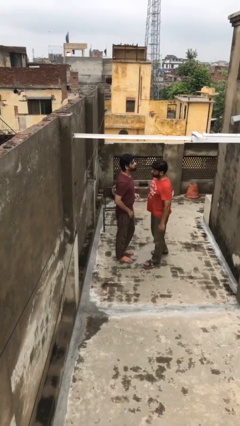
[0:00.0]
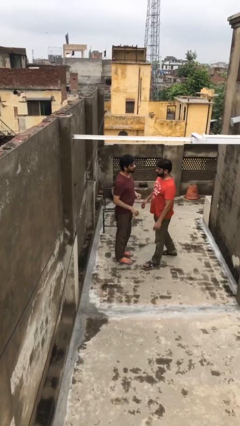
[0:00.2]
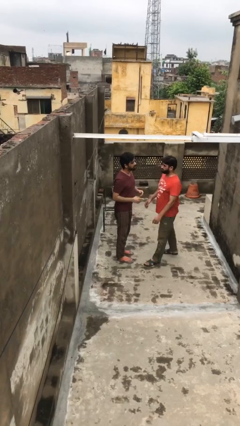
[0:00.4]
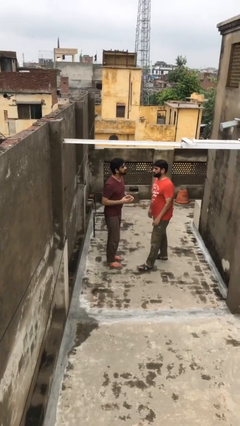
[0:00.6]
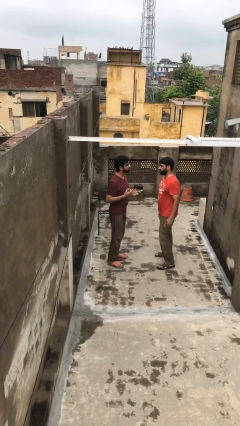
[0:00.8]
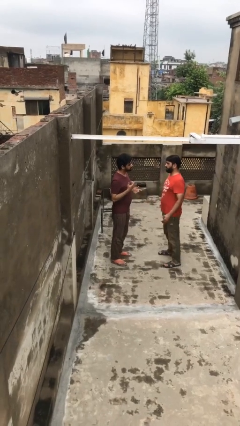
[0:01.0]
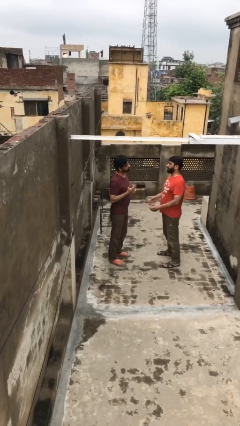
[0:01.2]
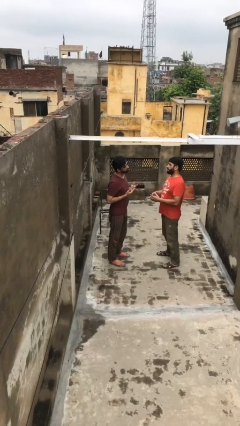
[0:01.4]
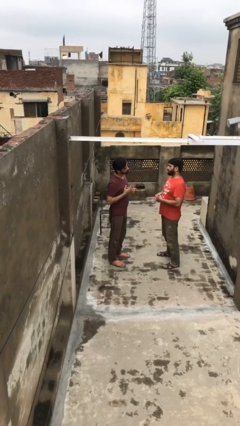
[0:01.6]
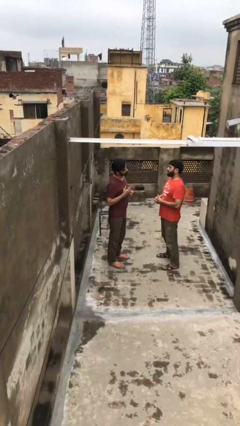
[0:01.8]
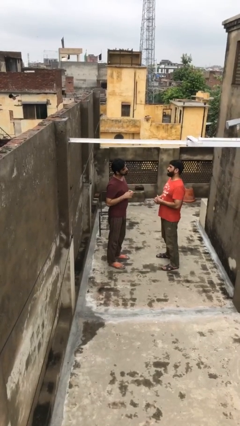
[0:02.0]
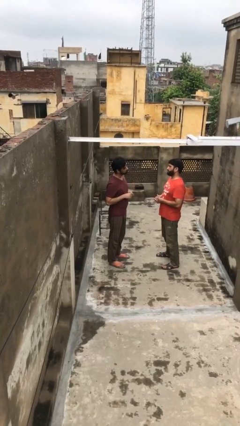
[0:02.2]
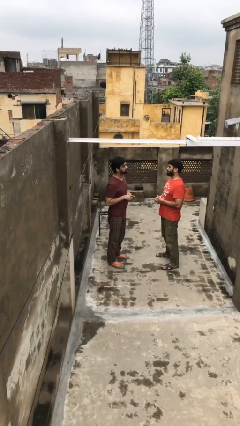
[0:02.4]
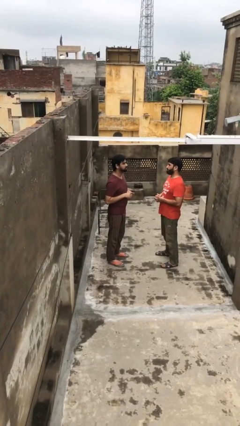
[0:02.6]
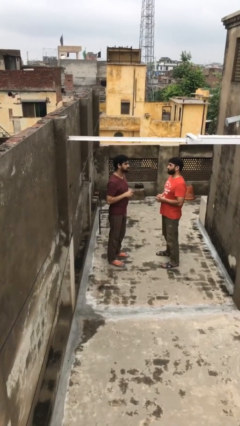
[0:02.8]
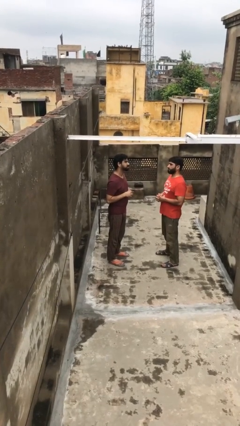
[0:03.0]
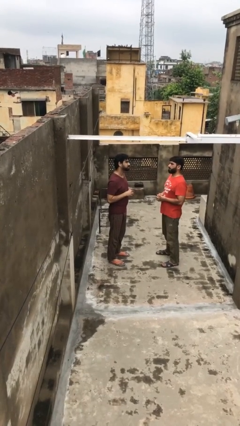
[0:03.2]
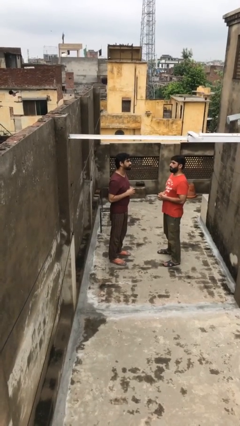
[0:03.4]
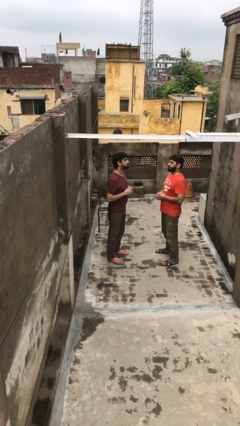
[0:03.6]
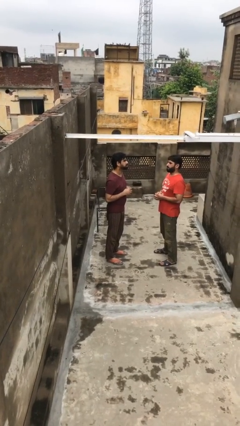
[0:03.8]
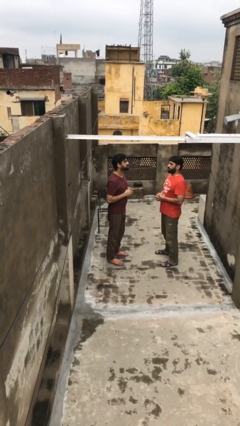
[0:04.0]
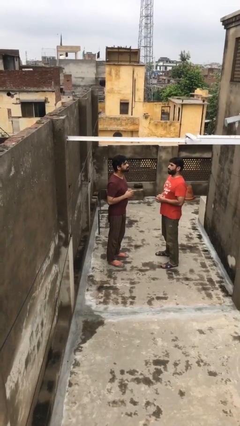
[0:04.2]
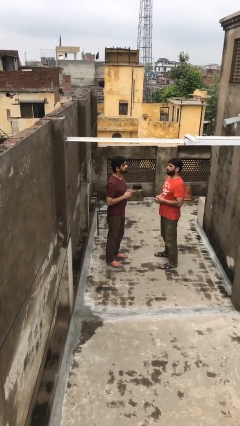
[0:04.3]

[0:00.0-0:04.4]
person talks to person

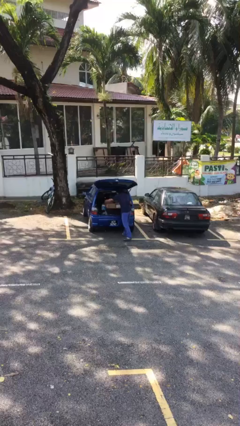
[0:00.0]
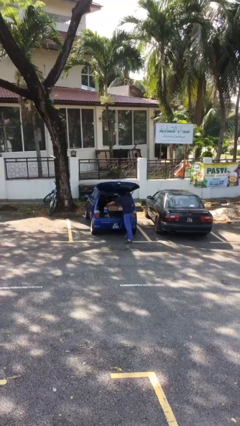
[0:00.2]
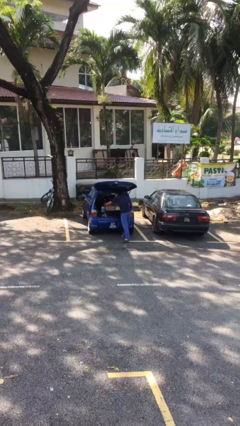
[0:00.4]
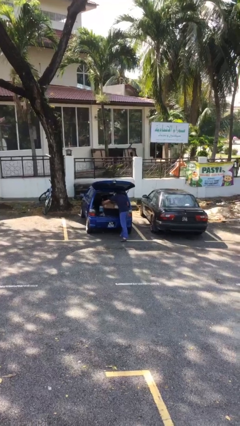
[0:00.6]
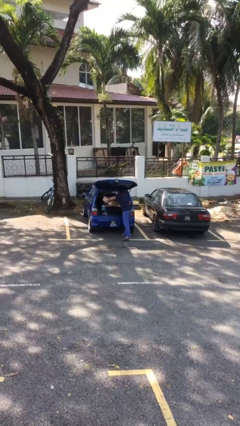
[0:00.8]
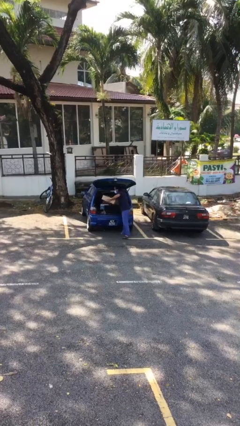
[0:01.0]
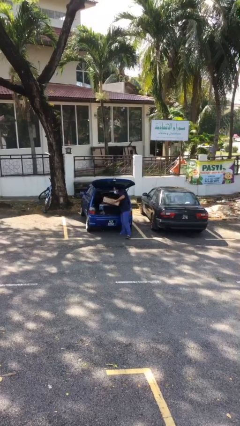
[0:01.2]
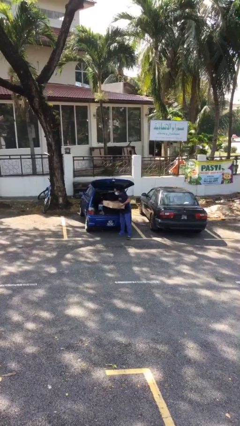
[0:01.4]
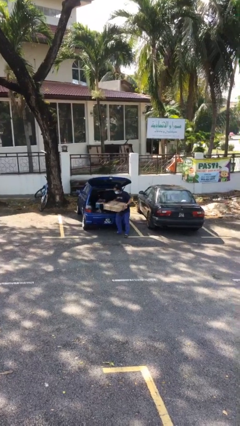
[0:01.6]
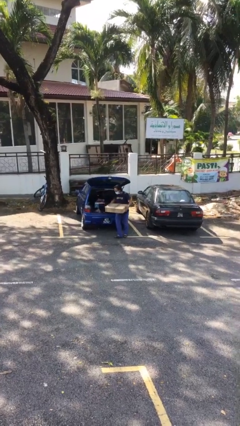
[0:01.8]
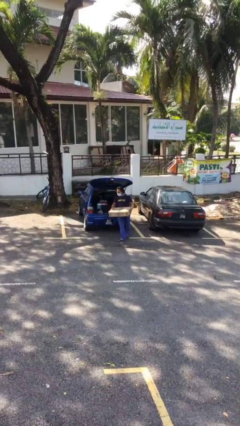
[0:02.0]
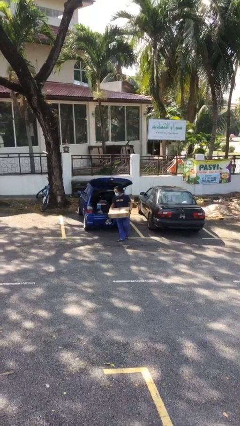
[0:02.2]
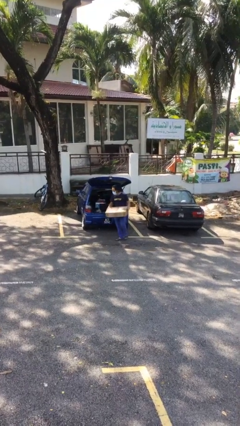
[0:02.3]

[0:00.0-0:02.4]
person unloads car

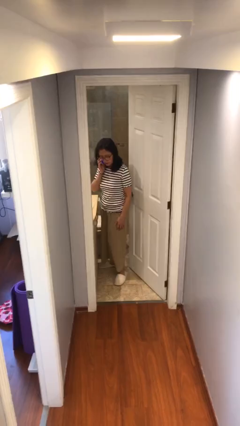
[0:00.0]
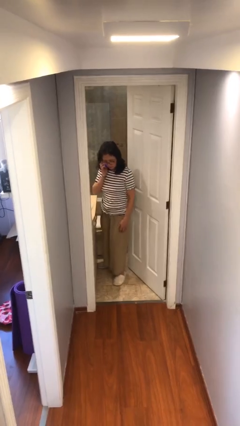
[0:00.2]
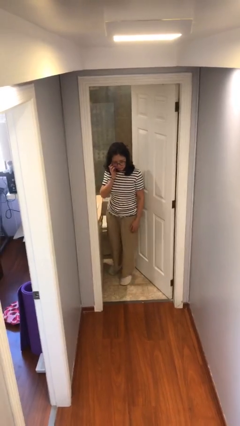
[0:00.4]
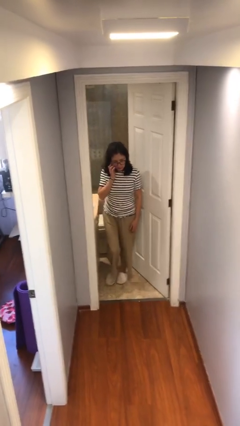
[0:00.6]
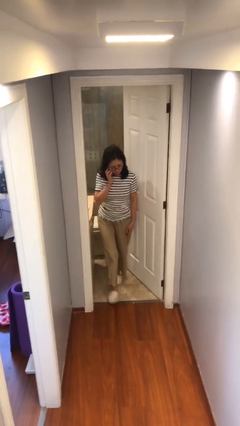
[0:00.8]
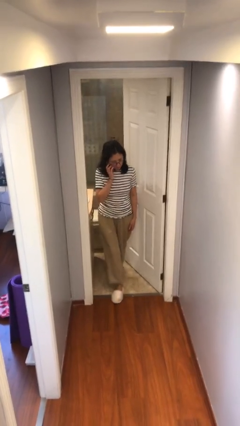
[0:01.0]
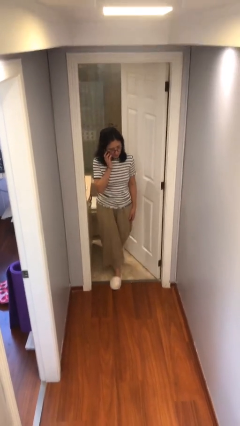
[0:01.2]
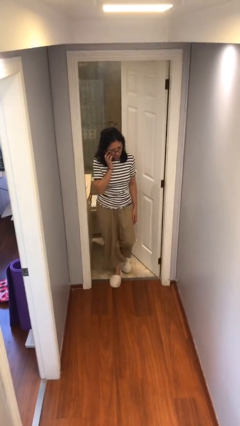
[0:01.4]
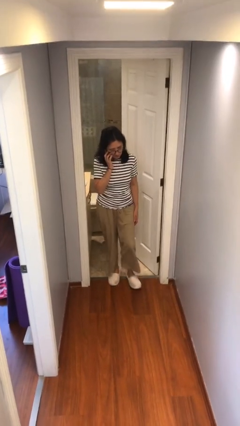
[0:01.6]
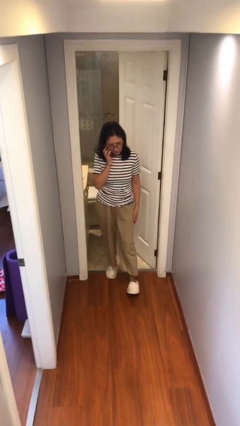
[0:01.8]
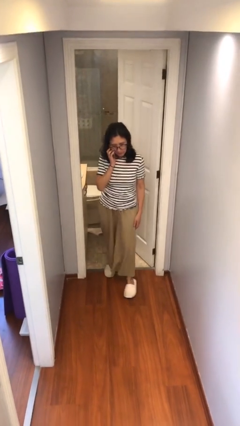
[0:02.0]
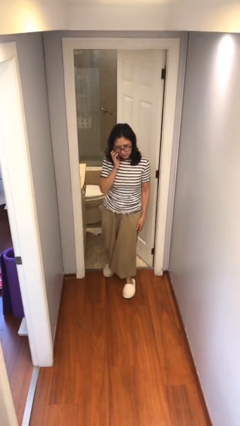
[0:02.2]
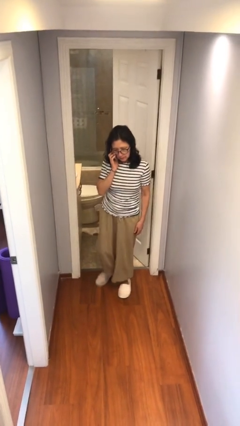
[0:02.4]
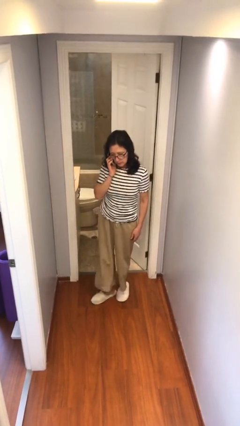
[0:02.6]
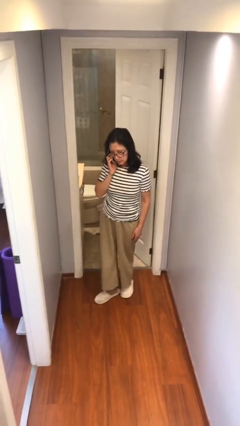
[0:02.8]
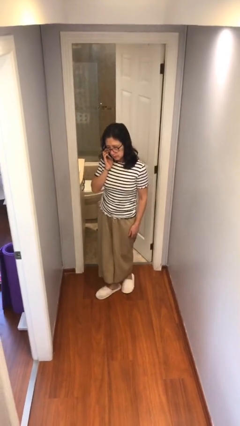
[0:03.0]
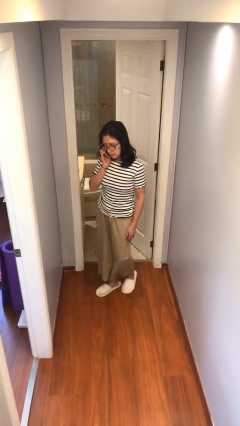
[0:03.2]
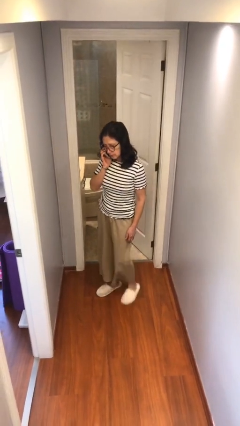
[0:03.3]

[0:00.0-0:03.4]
person enters scene through structure

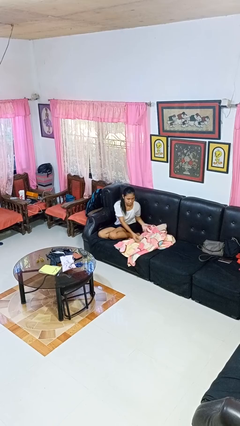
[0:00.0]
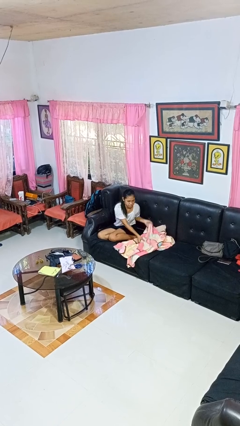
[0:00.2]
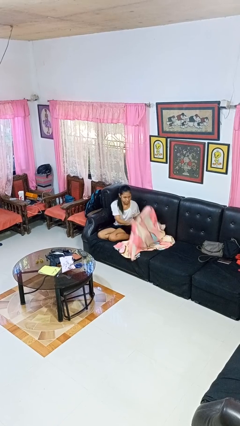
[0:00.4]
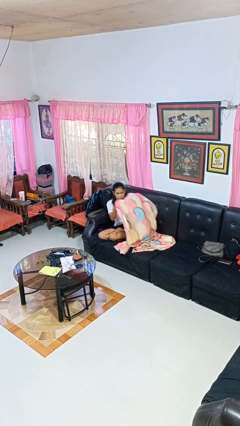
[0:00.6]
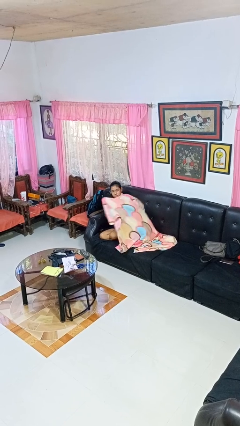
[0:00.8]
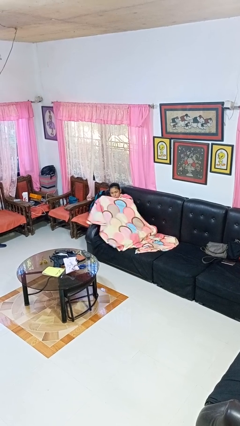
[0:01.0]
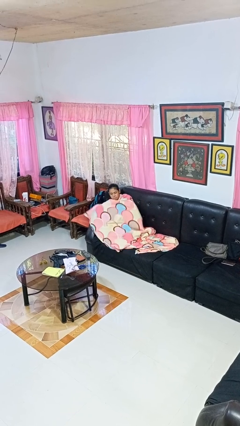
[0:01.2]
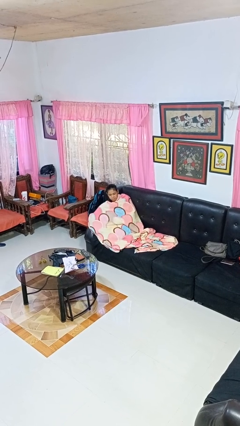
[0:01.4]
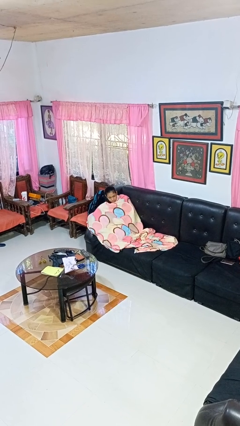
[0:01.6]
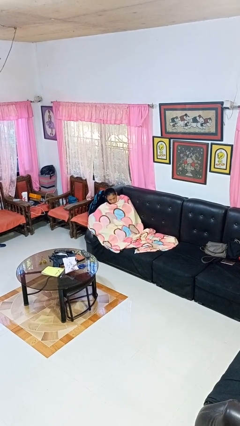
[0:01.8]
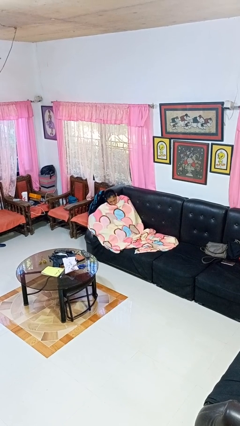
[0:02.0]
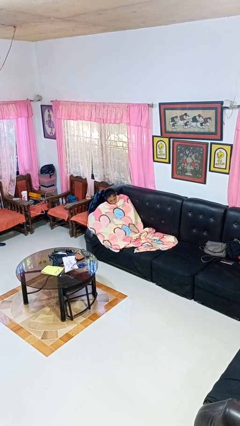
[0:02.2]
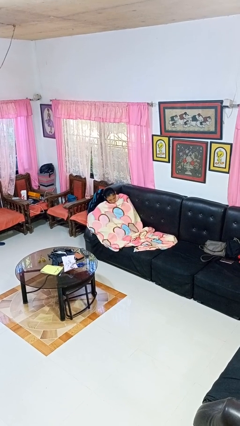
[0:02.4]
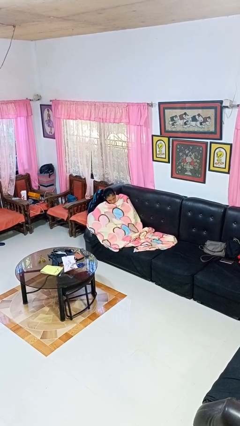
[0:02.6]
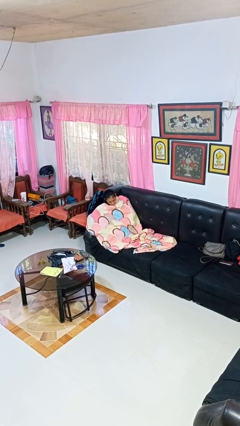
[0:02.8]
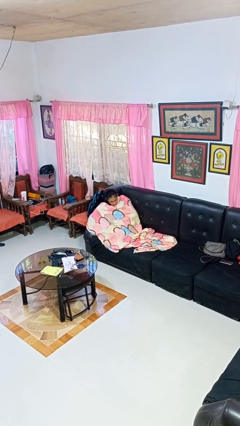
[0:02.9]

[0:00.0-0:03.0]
person covers with blanket

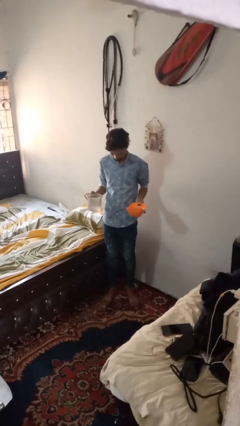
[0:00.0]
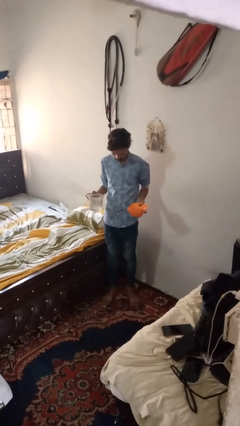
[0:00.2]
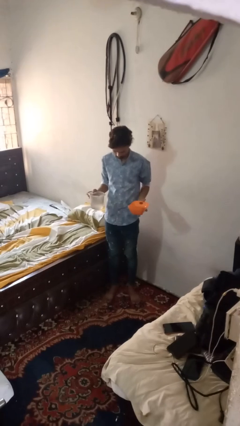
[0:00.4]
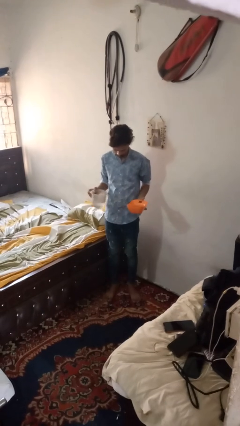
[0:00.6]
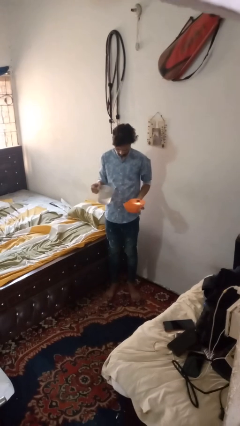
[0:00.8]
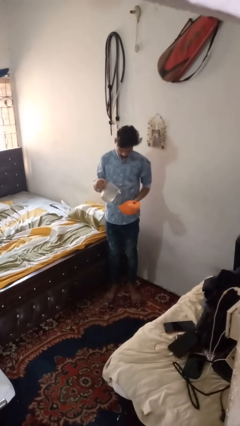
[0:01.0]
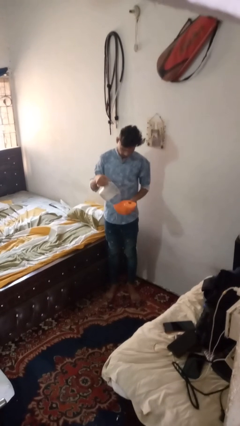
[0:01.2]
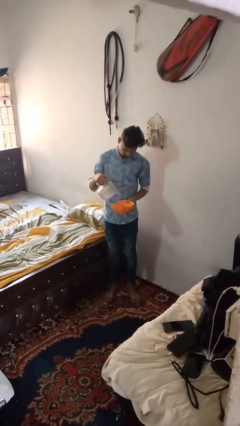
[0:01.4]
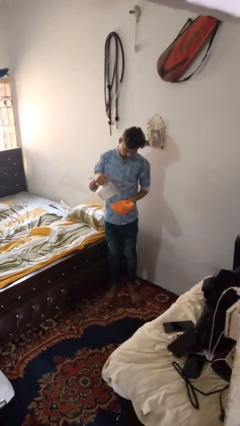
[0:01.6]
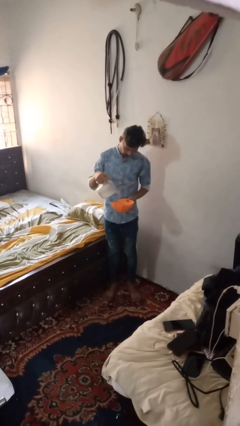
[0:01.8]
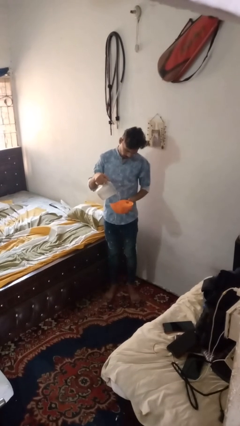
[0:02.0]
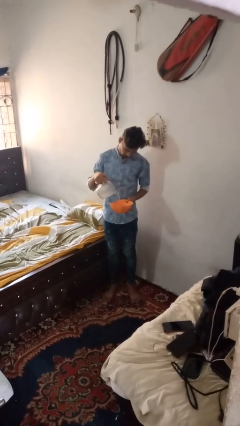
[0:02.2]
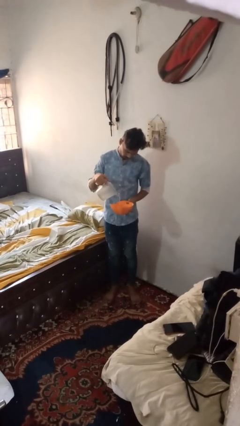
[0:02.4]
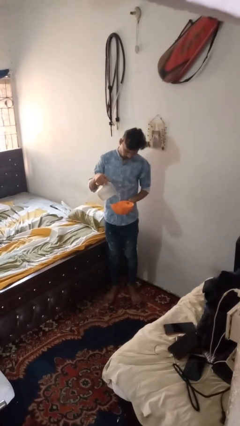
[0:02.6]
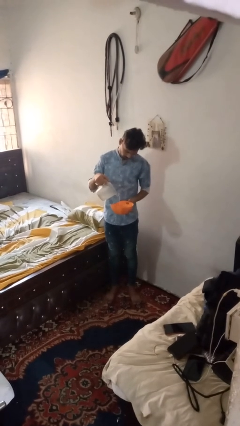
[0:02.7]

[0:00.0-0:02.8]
person pours into bowl

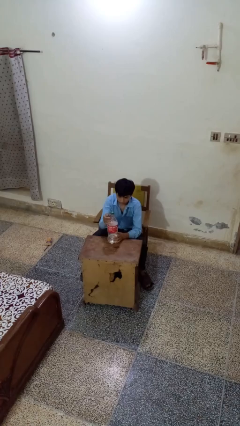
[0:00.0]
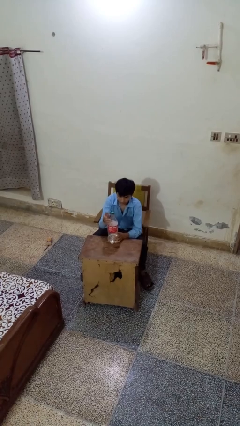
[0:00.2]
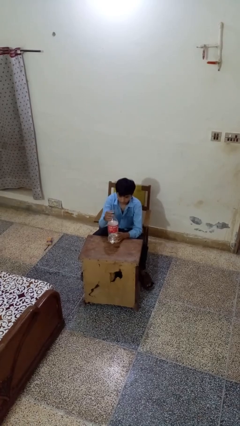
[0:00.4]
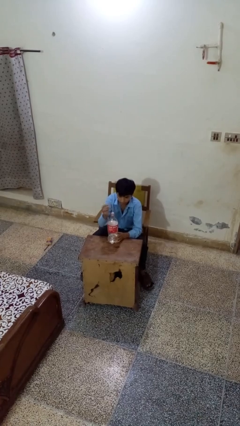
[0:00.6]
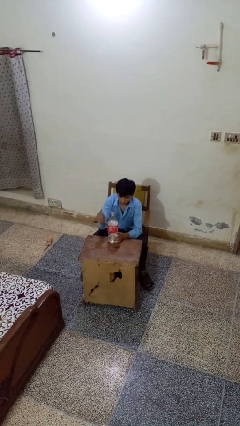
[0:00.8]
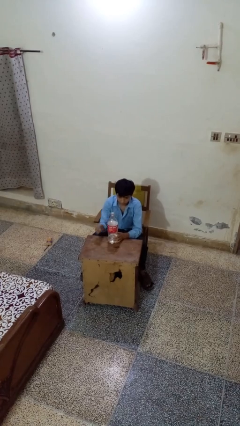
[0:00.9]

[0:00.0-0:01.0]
person unscrews lid from bottle

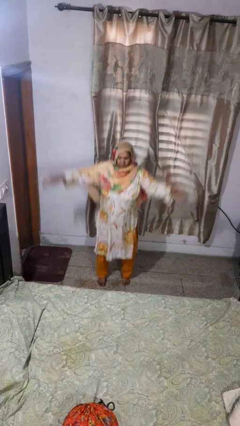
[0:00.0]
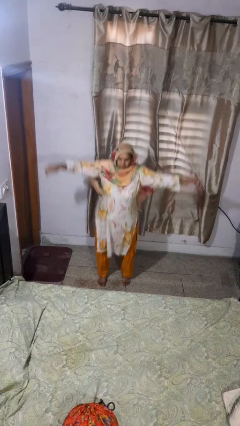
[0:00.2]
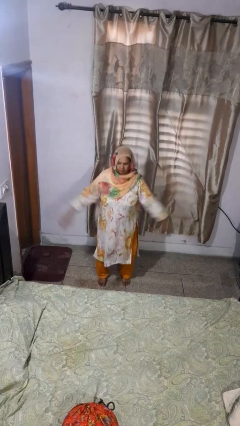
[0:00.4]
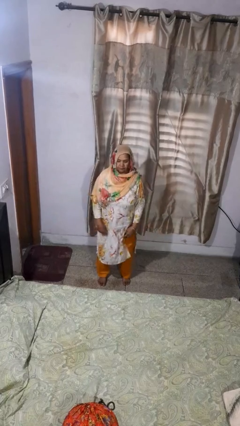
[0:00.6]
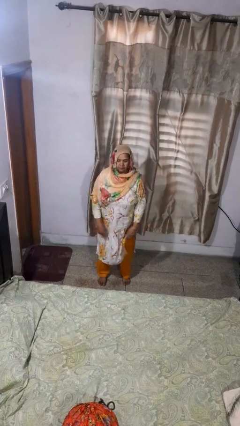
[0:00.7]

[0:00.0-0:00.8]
person jumps
